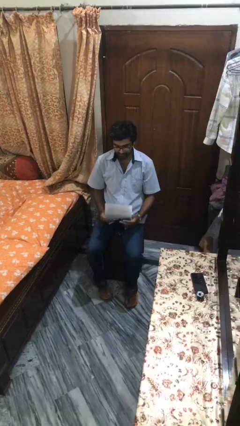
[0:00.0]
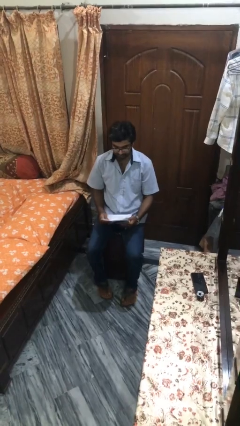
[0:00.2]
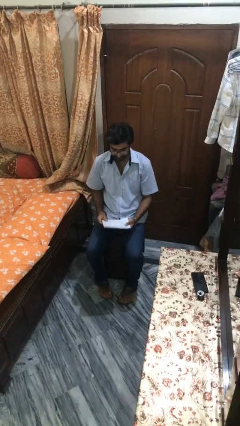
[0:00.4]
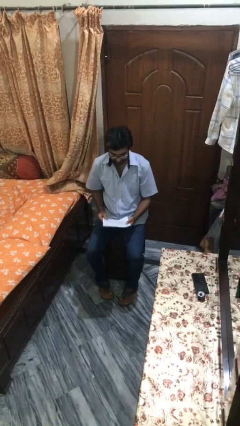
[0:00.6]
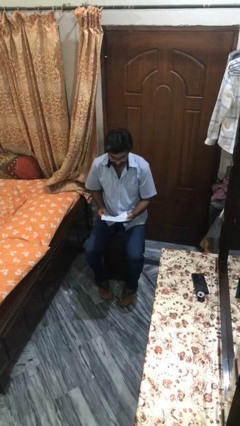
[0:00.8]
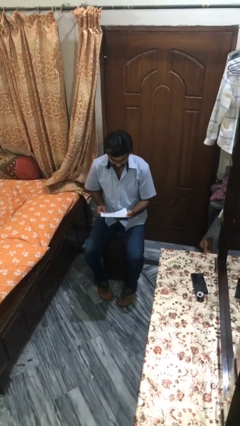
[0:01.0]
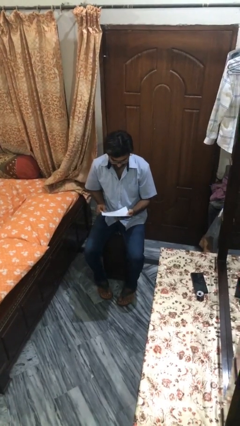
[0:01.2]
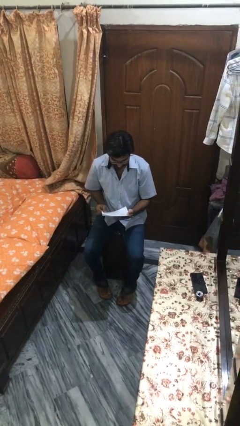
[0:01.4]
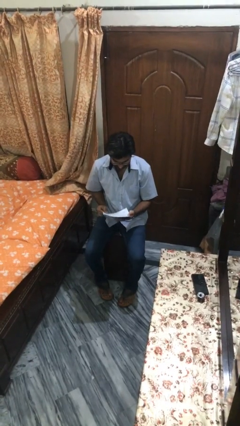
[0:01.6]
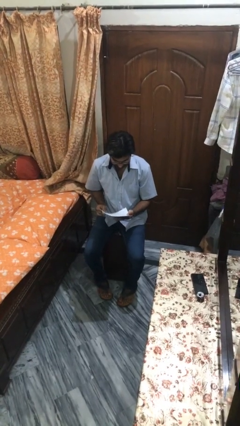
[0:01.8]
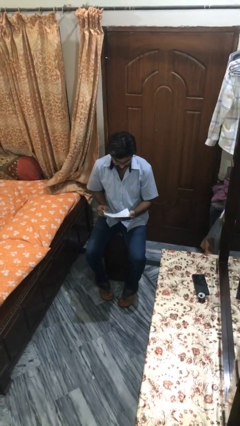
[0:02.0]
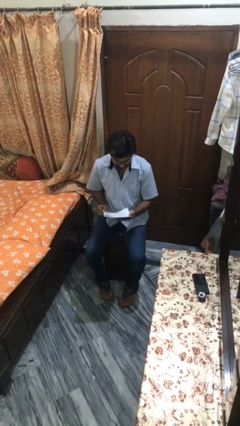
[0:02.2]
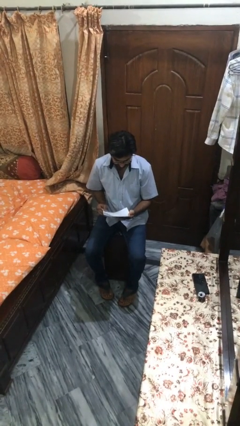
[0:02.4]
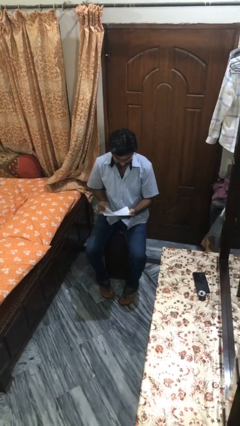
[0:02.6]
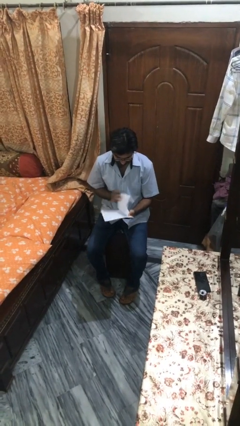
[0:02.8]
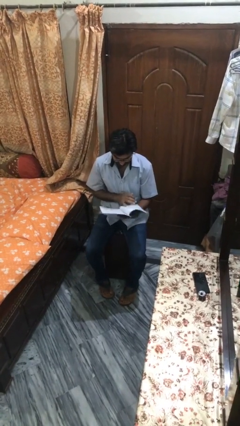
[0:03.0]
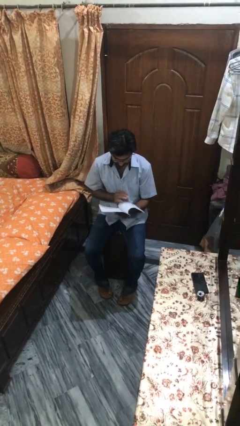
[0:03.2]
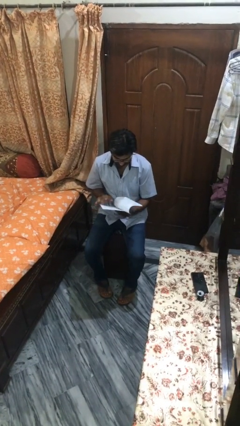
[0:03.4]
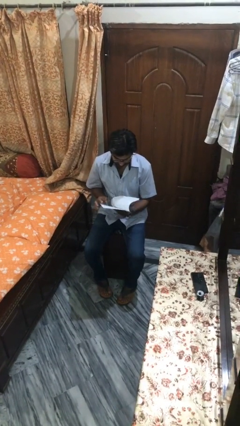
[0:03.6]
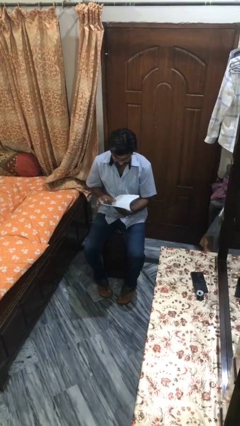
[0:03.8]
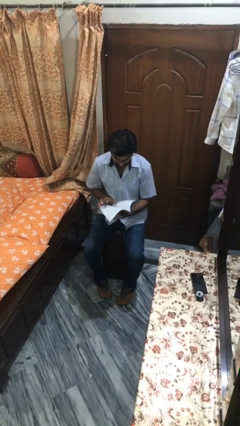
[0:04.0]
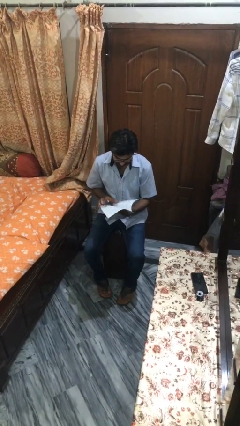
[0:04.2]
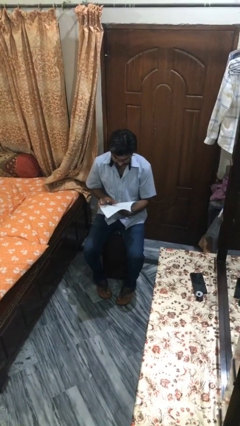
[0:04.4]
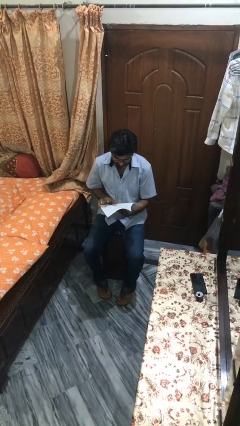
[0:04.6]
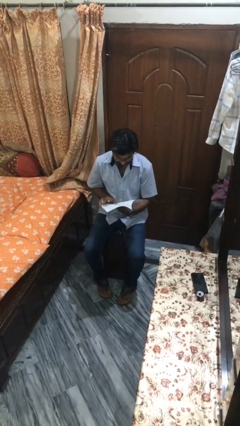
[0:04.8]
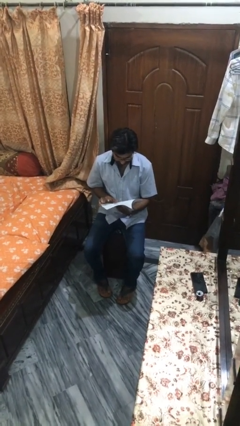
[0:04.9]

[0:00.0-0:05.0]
person reads document

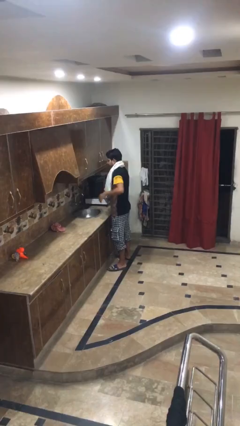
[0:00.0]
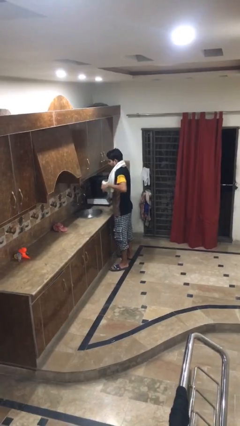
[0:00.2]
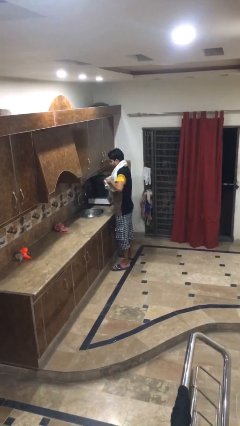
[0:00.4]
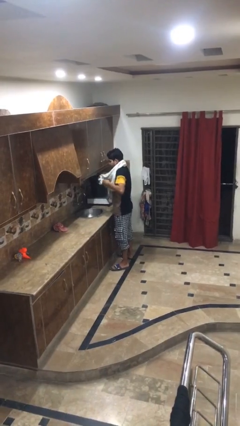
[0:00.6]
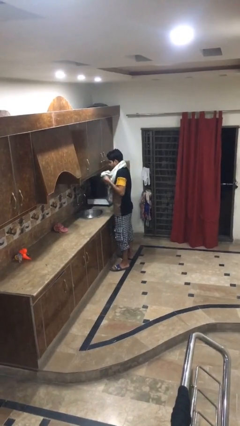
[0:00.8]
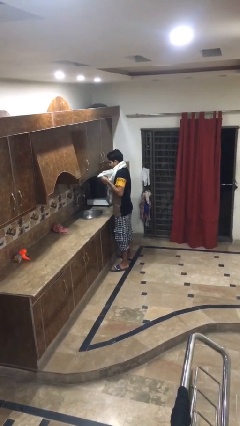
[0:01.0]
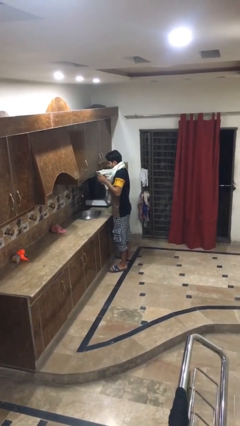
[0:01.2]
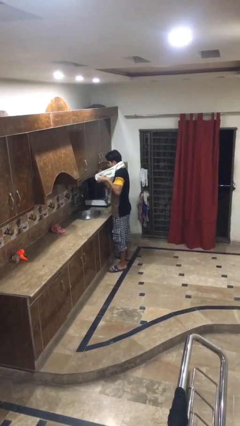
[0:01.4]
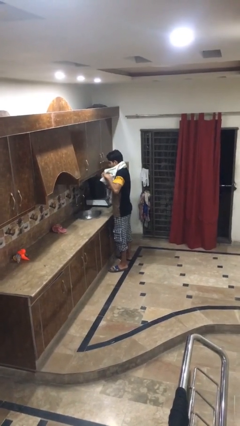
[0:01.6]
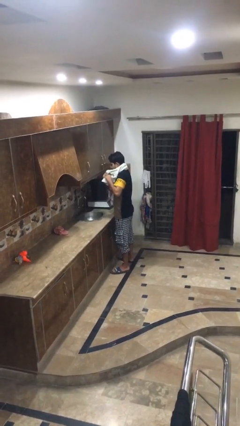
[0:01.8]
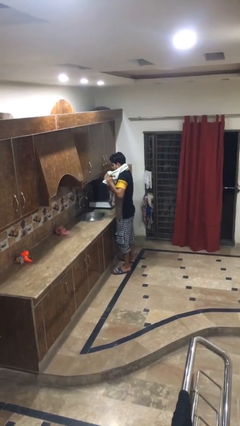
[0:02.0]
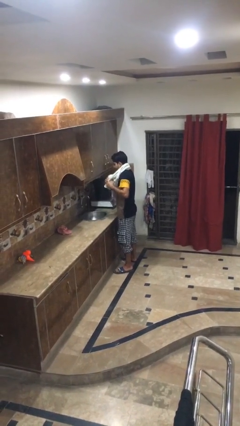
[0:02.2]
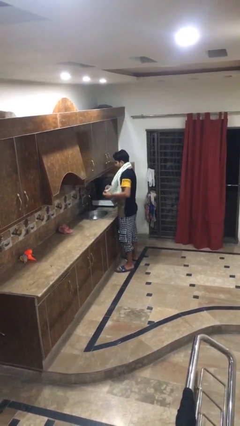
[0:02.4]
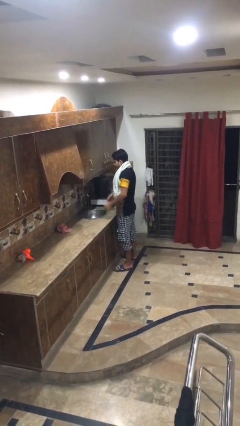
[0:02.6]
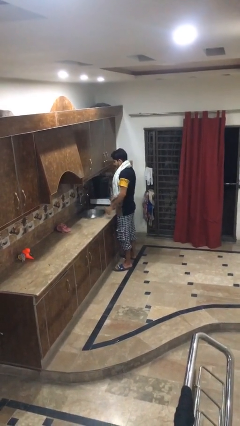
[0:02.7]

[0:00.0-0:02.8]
person dries hands with towel

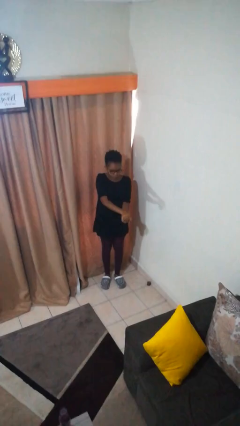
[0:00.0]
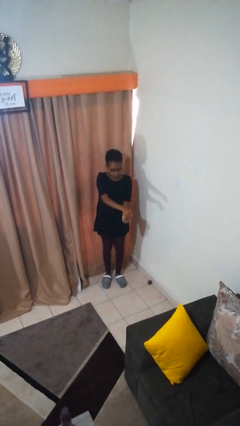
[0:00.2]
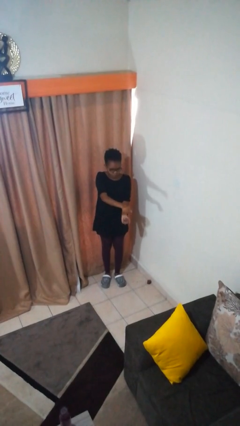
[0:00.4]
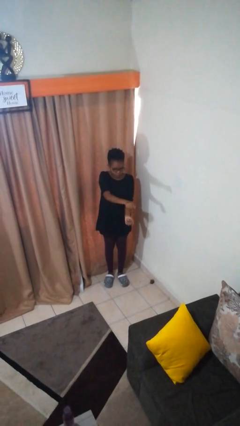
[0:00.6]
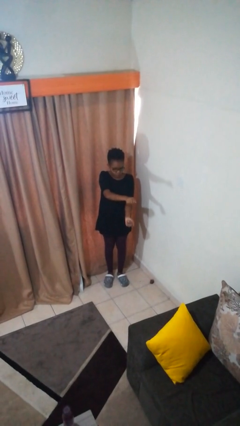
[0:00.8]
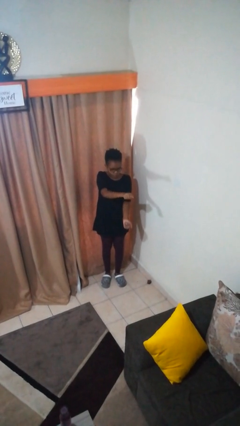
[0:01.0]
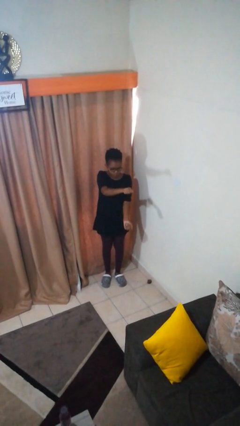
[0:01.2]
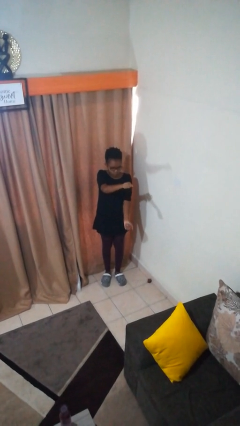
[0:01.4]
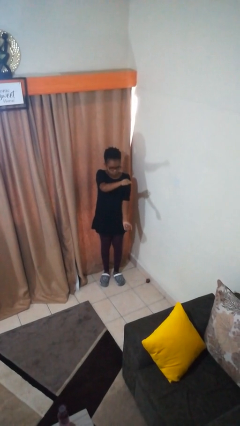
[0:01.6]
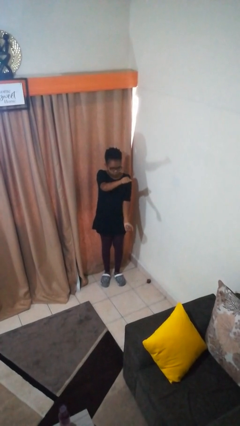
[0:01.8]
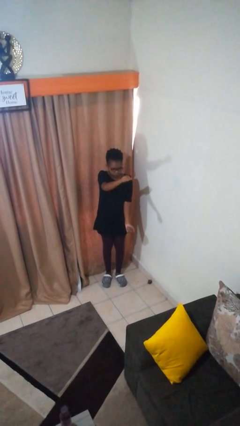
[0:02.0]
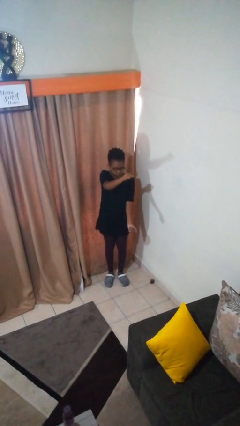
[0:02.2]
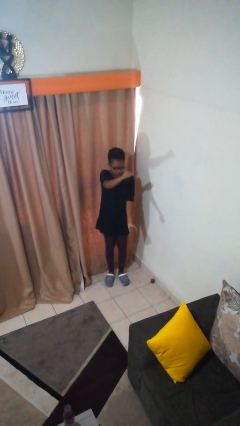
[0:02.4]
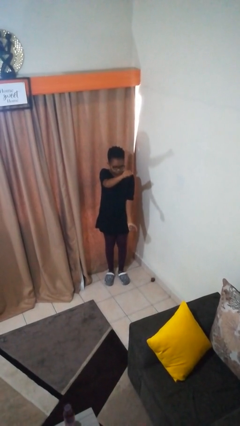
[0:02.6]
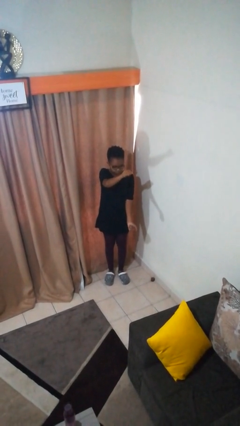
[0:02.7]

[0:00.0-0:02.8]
person gestures zoom in

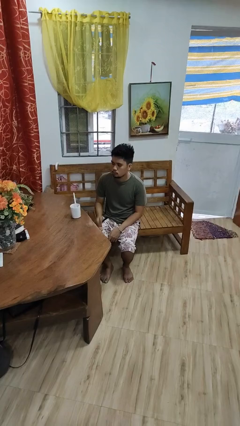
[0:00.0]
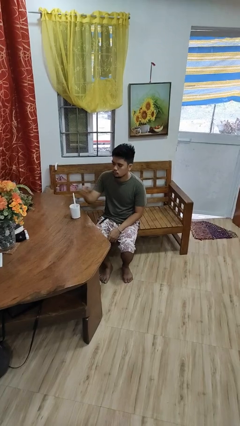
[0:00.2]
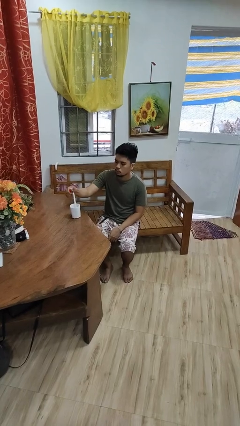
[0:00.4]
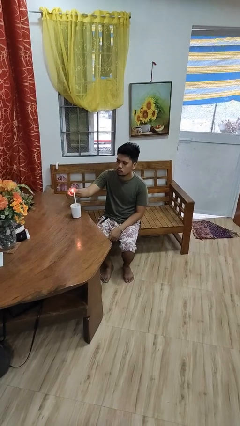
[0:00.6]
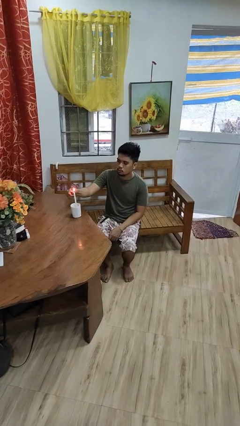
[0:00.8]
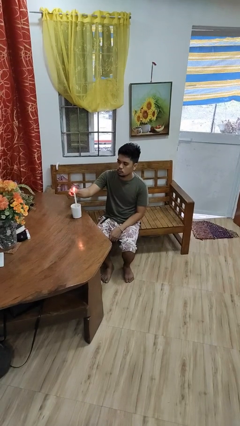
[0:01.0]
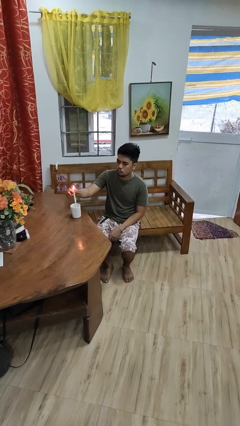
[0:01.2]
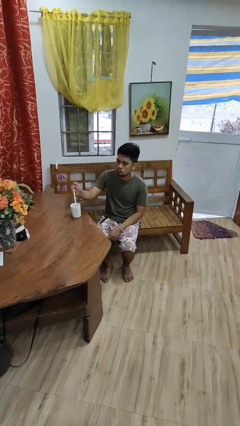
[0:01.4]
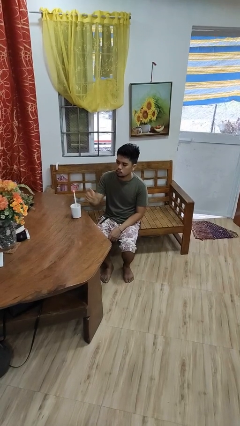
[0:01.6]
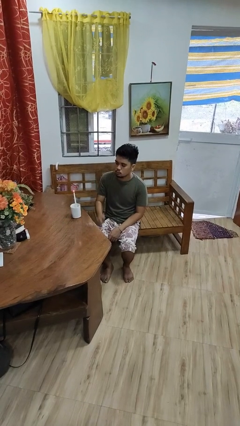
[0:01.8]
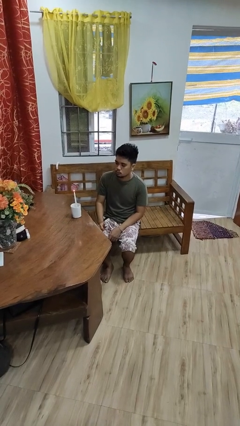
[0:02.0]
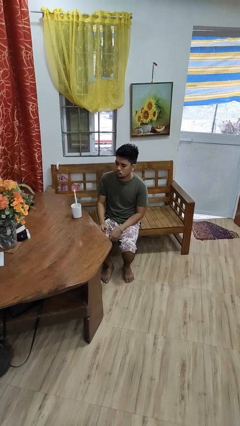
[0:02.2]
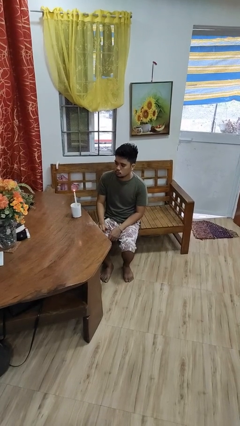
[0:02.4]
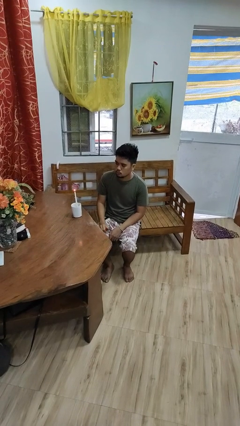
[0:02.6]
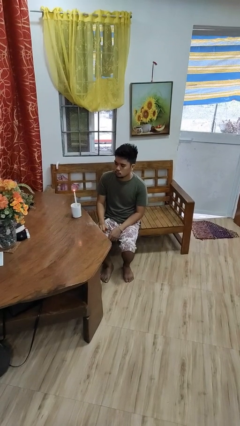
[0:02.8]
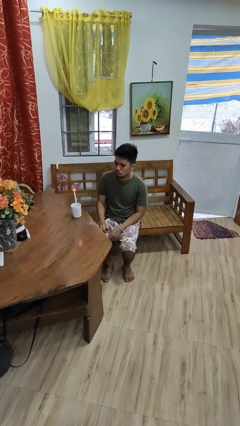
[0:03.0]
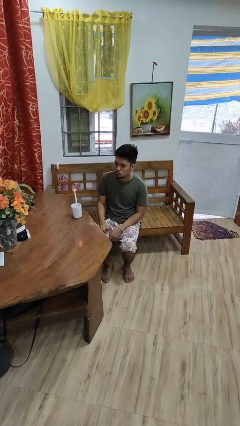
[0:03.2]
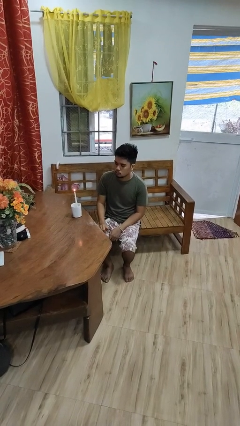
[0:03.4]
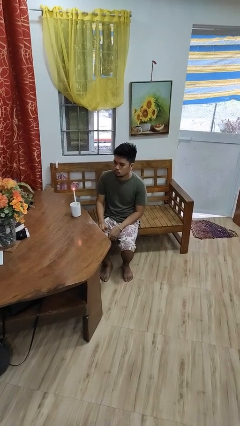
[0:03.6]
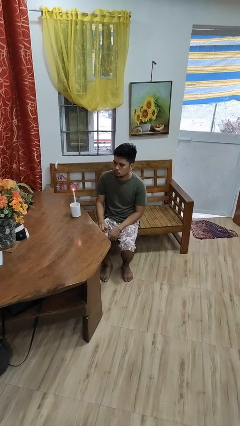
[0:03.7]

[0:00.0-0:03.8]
person lights candle

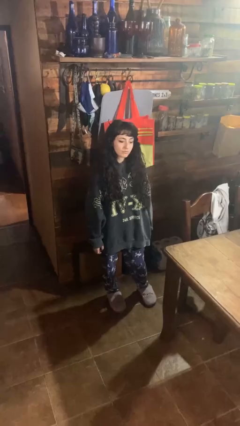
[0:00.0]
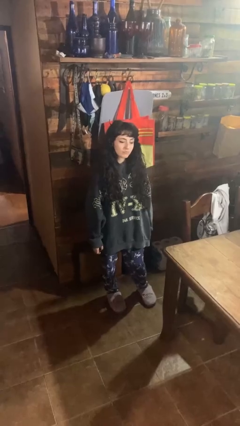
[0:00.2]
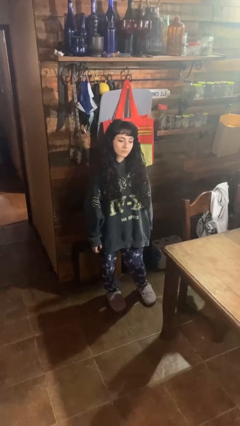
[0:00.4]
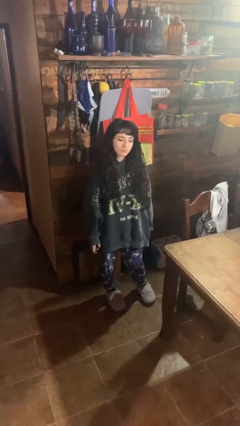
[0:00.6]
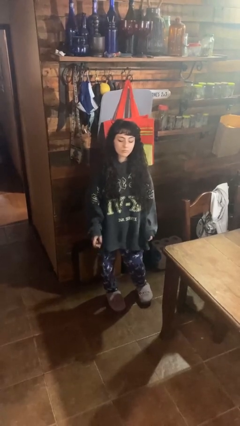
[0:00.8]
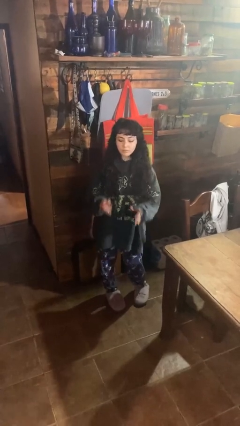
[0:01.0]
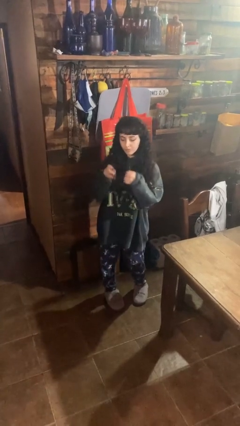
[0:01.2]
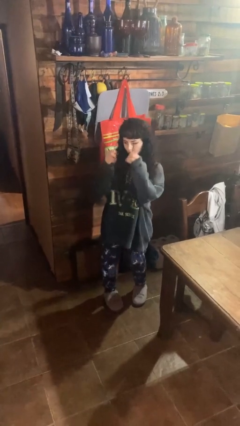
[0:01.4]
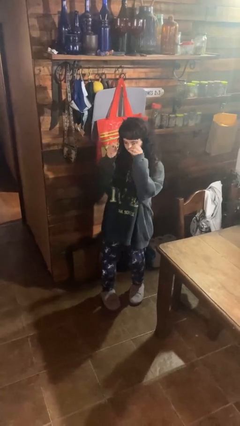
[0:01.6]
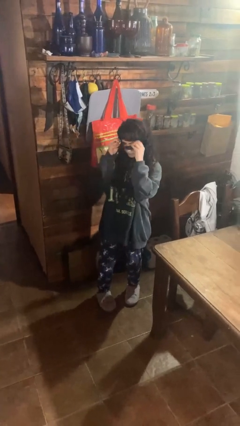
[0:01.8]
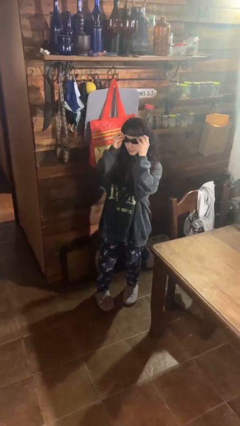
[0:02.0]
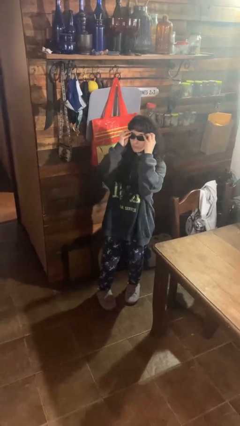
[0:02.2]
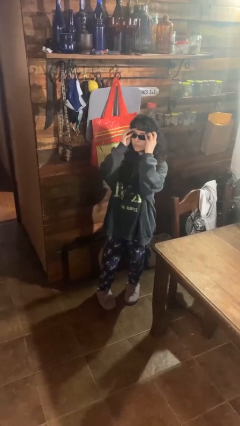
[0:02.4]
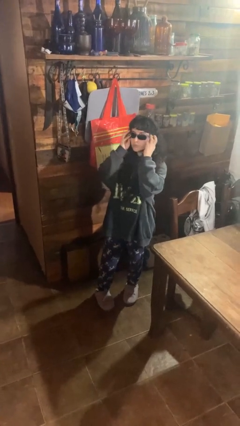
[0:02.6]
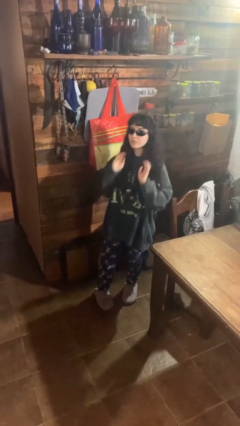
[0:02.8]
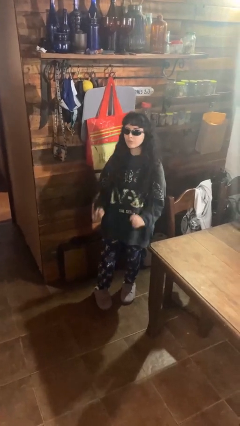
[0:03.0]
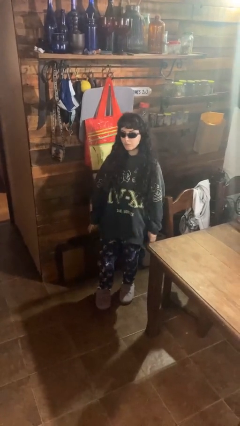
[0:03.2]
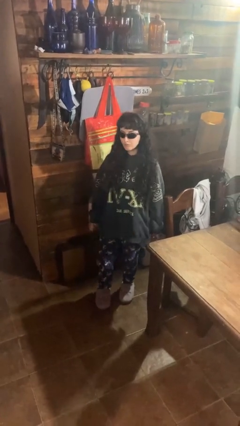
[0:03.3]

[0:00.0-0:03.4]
person puts on sunglasses
